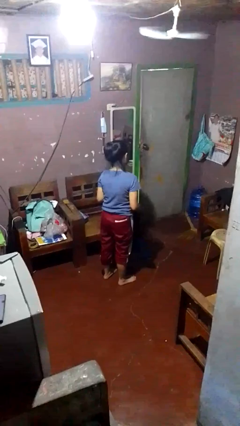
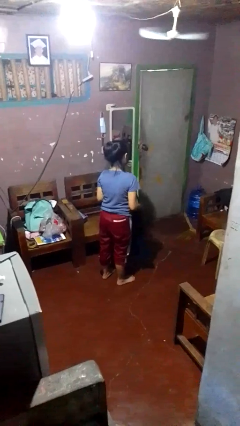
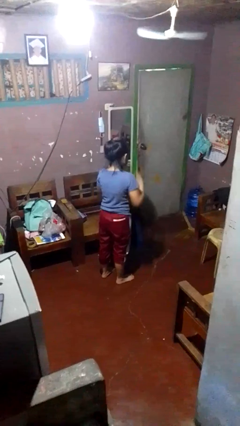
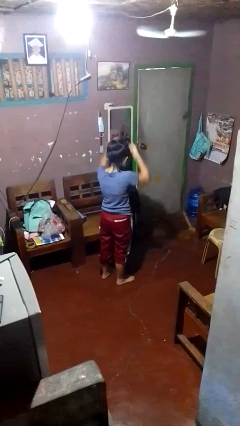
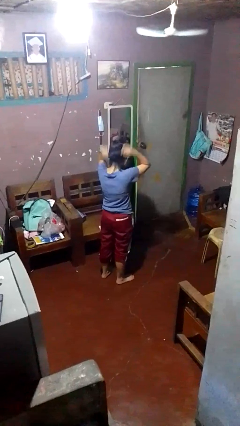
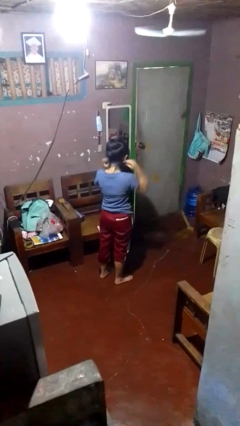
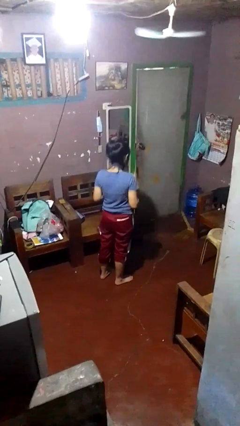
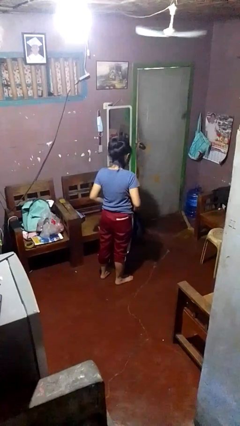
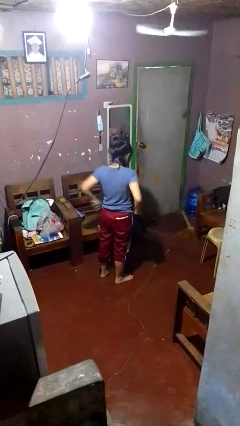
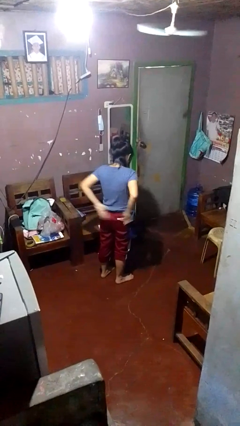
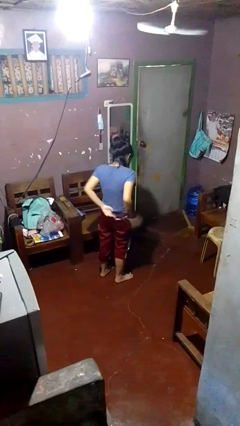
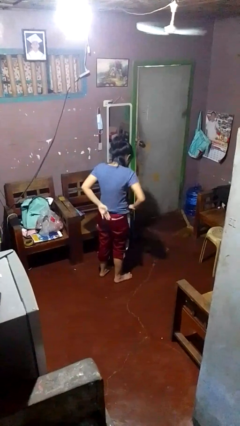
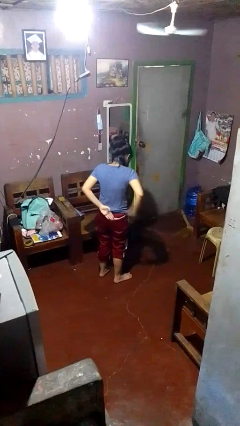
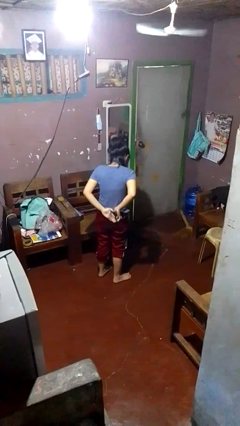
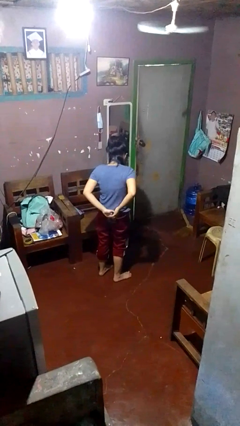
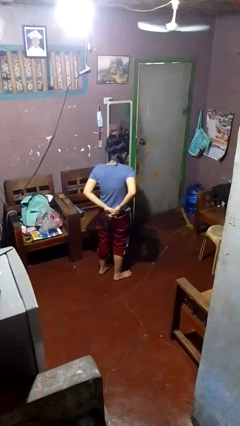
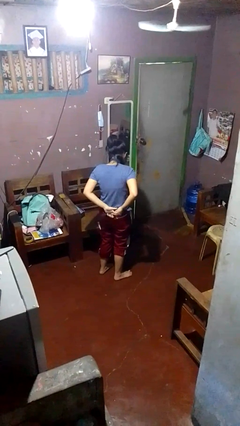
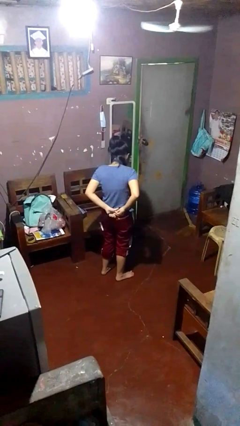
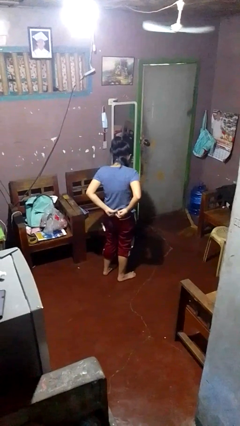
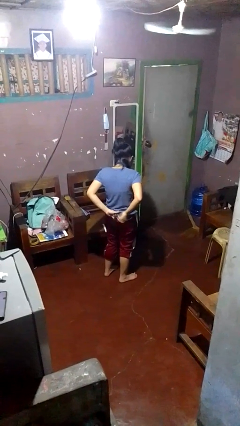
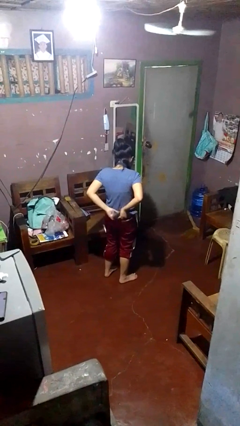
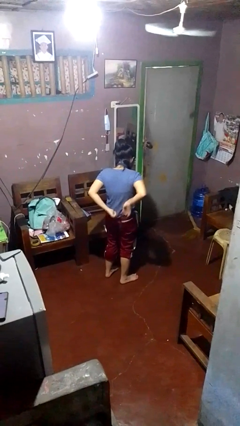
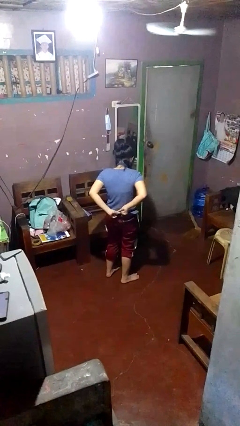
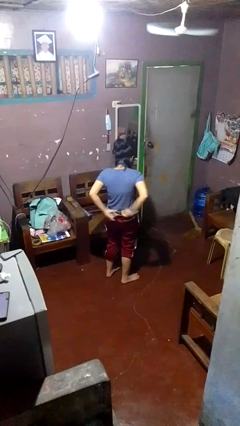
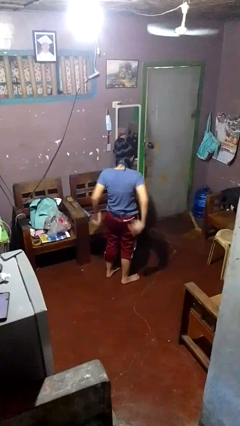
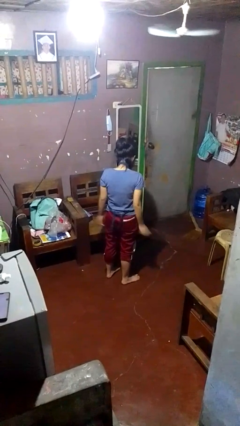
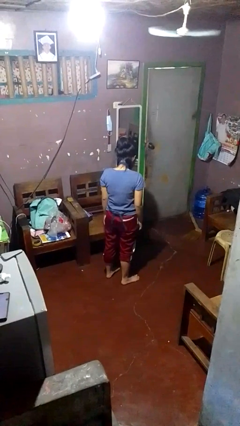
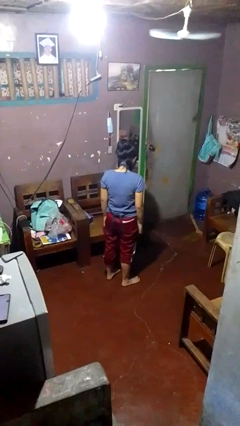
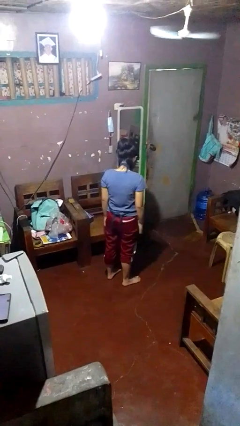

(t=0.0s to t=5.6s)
person puts on apron

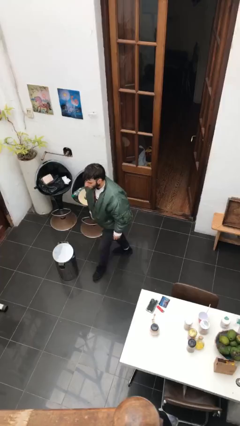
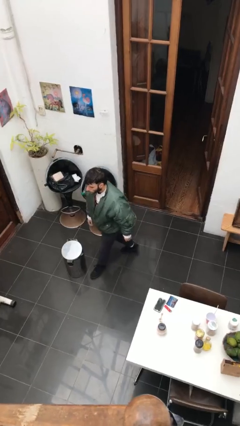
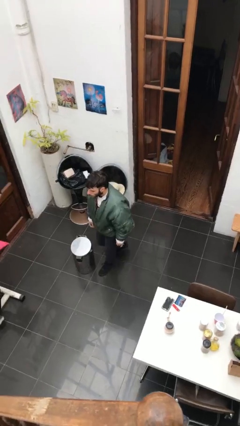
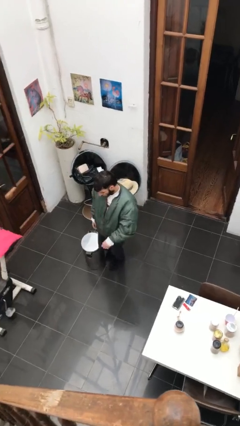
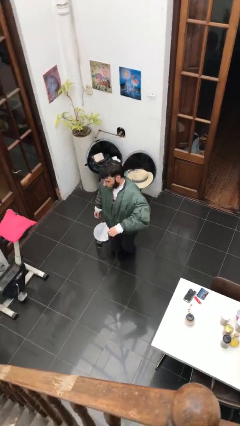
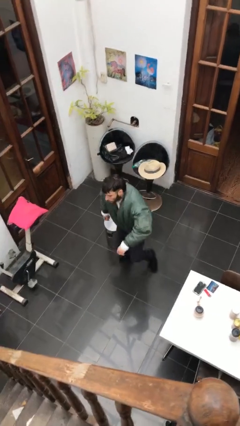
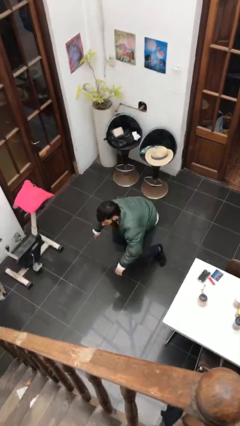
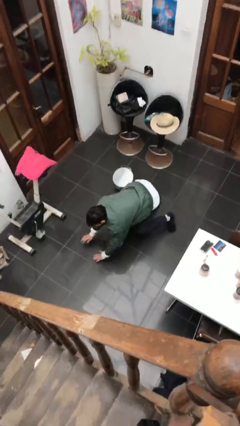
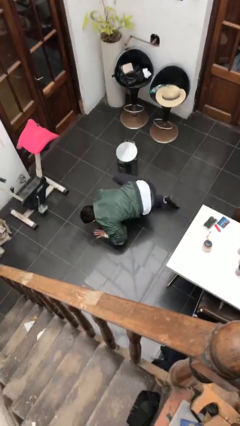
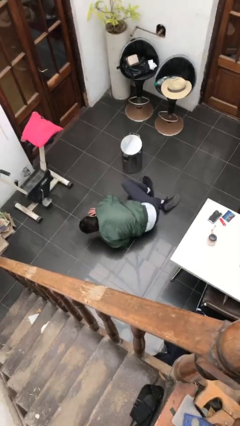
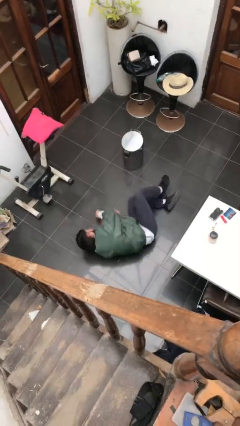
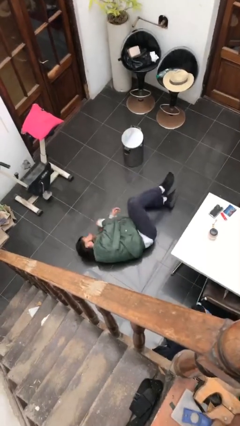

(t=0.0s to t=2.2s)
person trips on object on floor

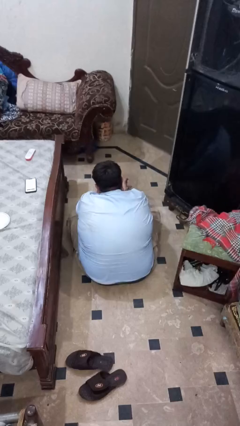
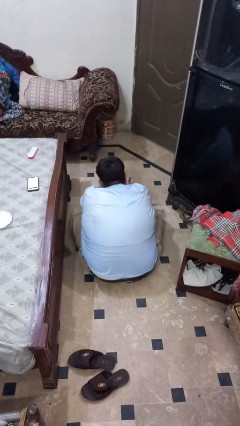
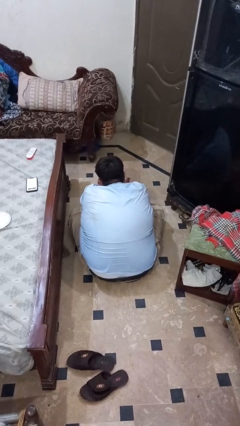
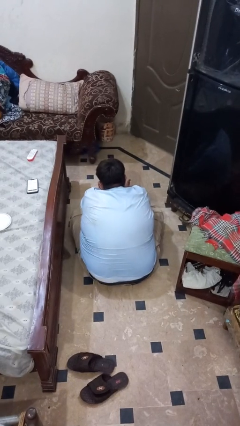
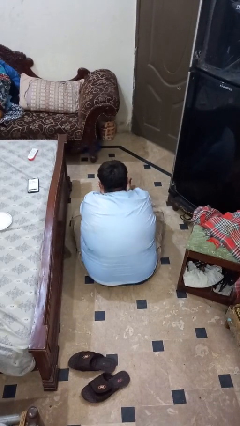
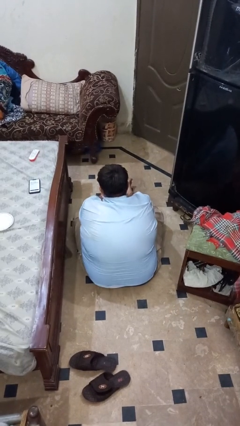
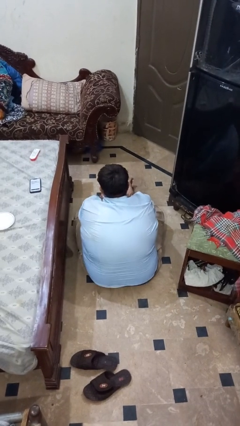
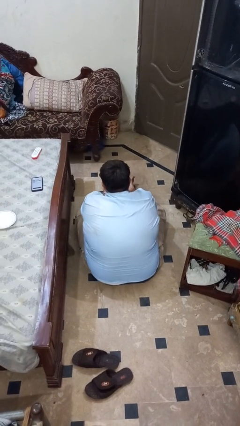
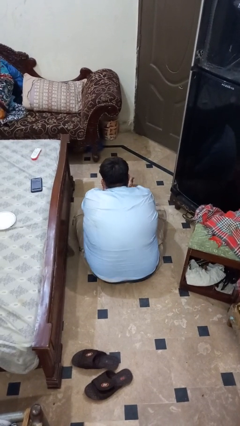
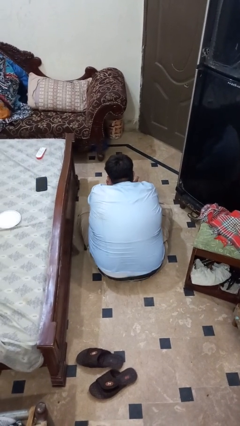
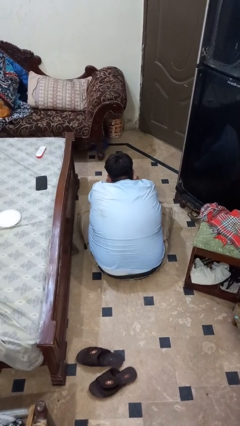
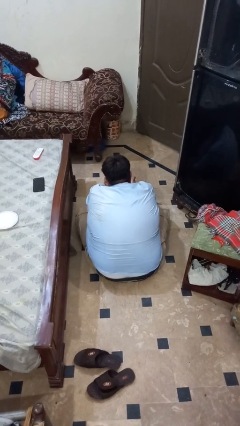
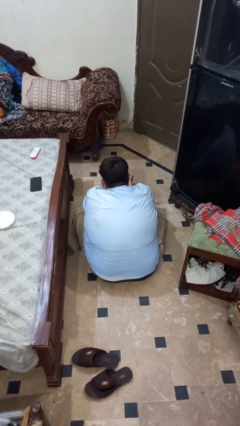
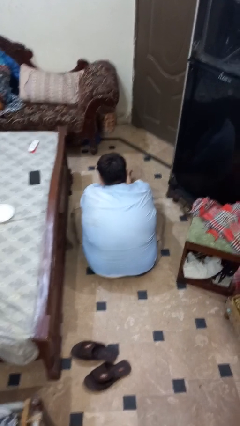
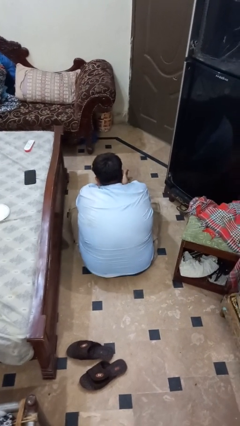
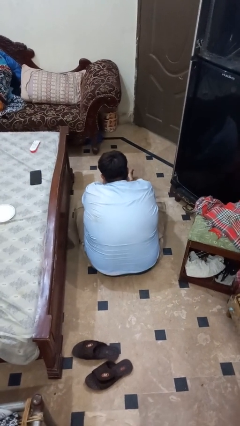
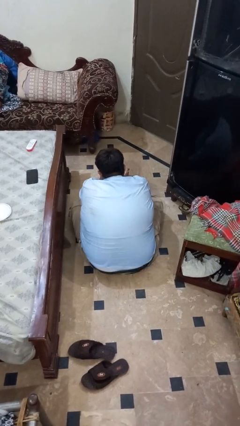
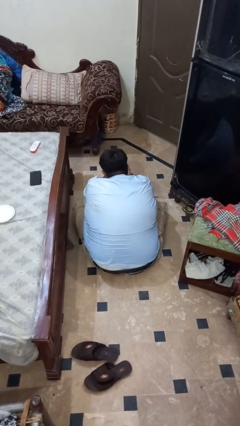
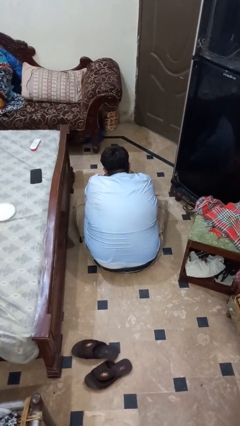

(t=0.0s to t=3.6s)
person rubs foot

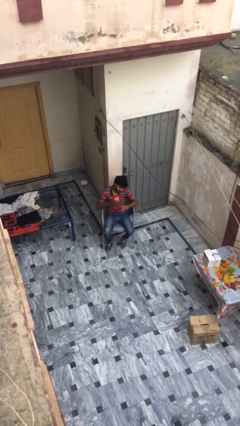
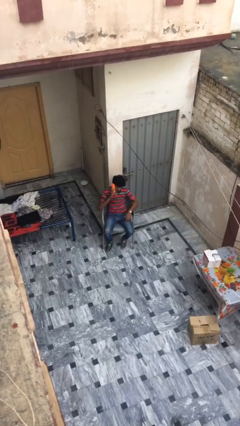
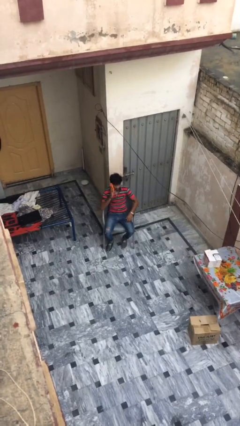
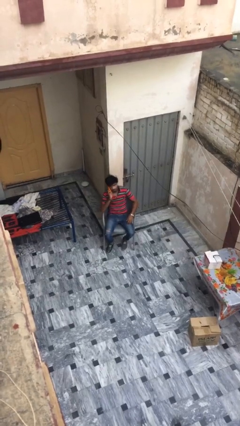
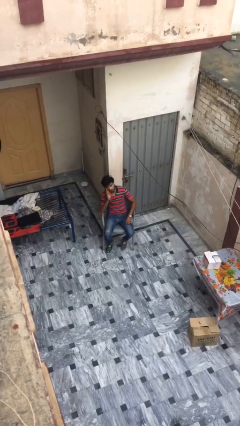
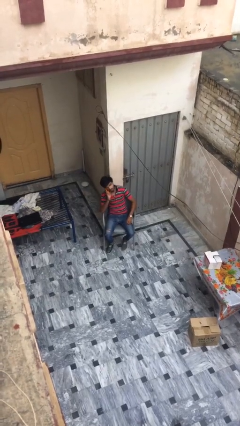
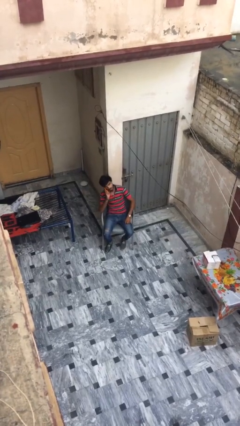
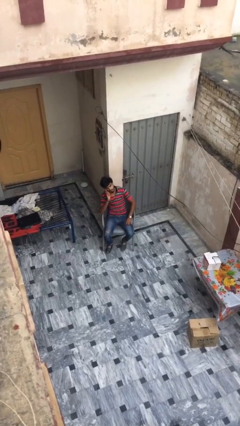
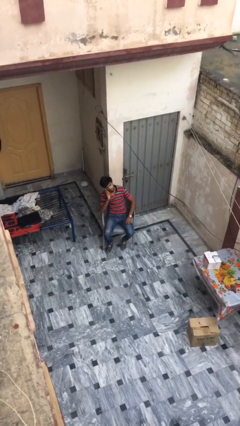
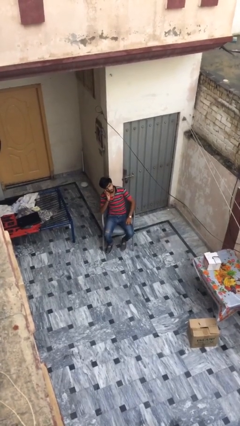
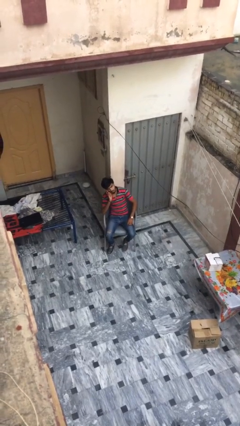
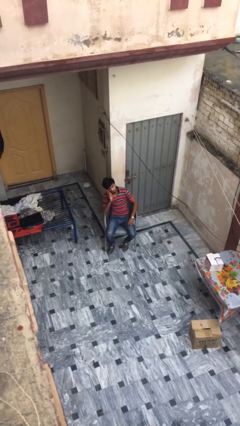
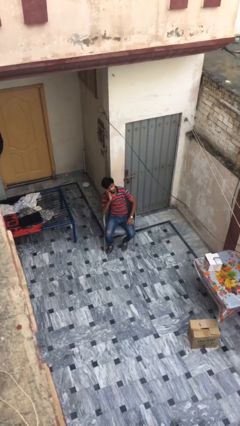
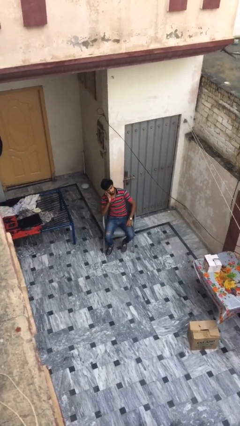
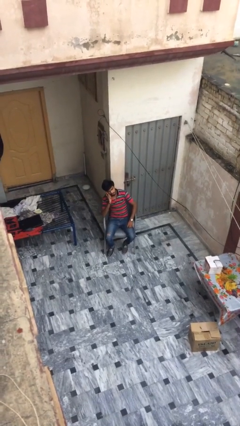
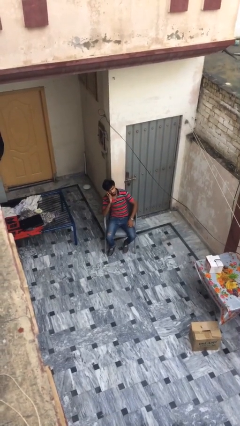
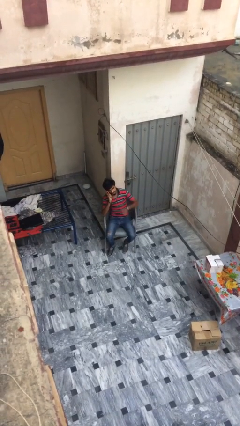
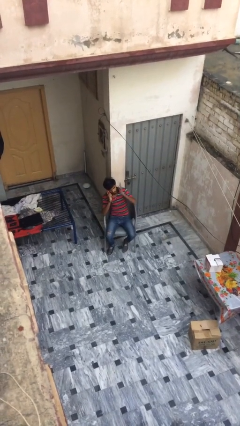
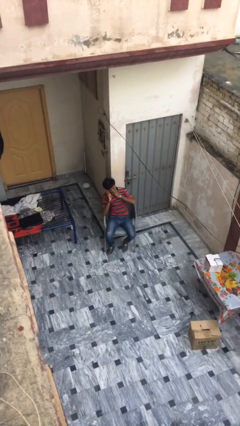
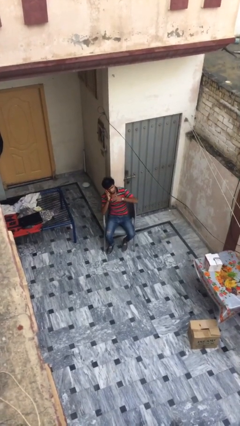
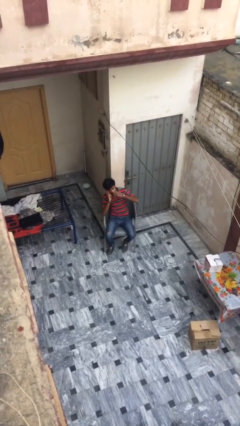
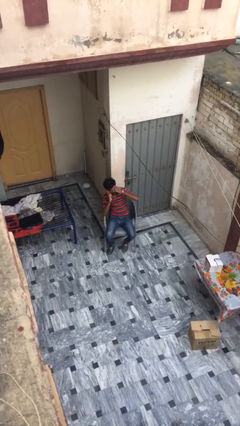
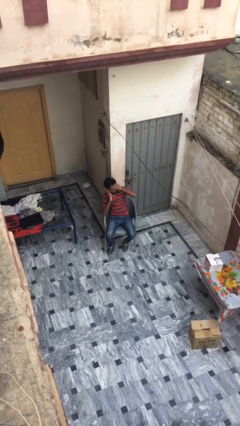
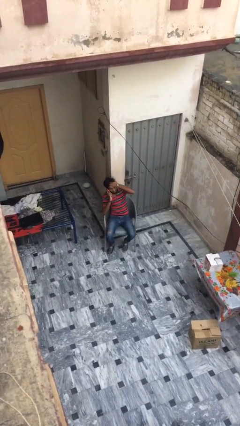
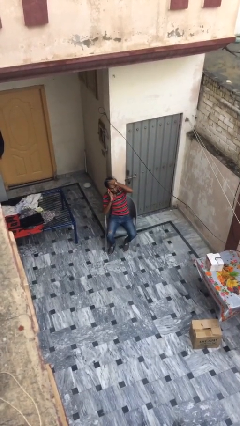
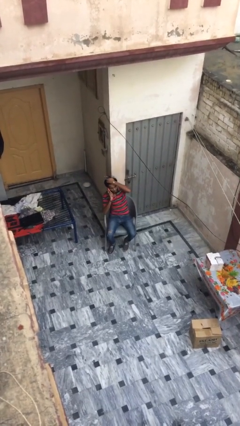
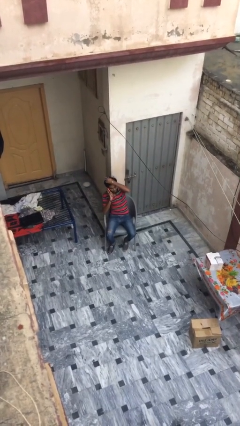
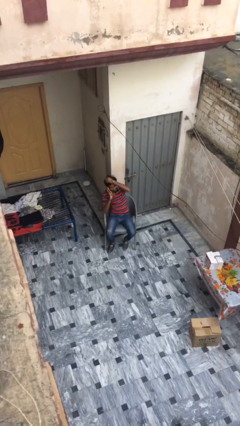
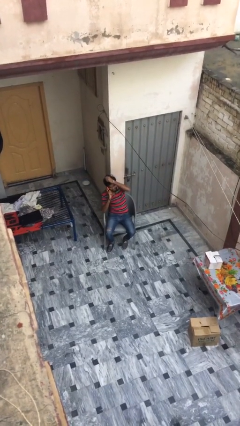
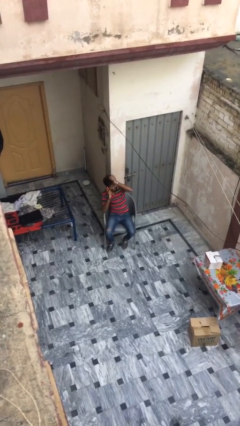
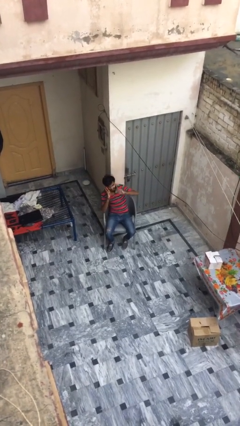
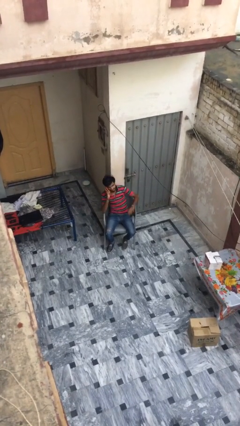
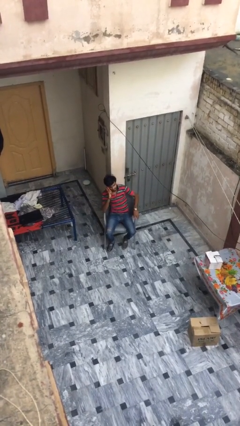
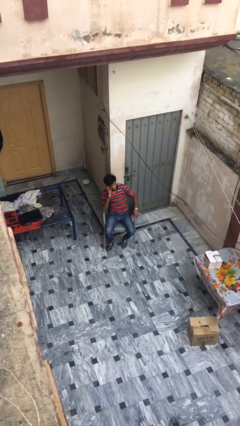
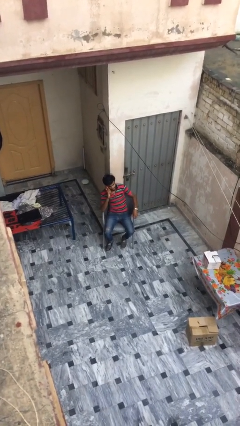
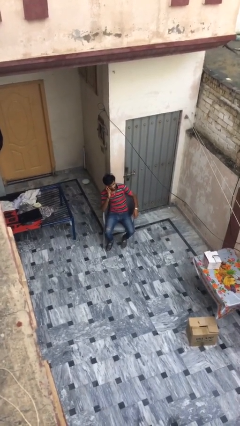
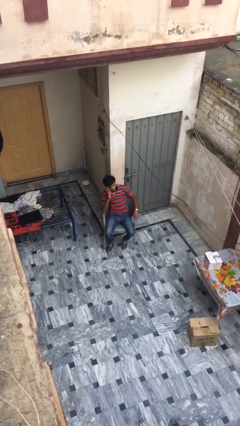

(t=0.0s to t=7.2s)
person talks on phone
